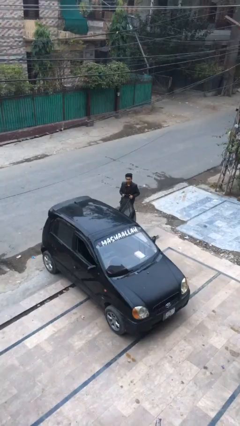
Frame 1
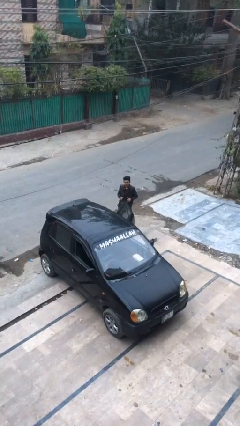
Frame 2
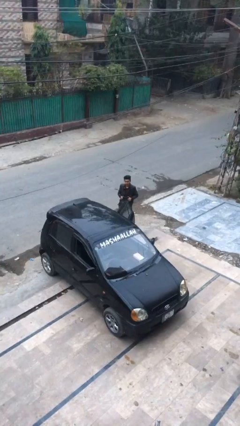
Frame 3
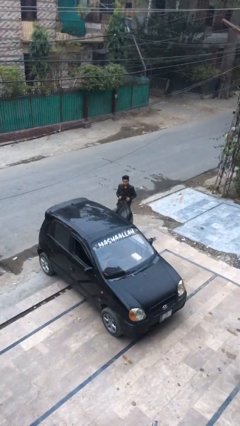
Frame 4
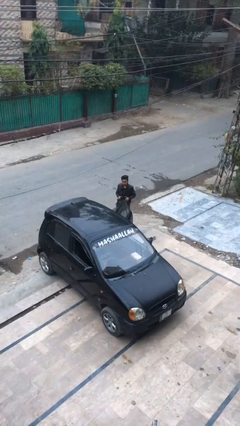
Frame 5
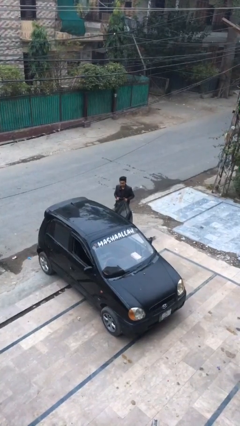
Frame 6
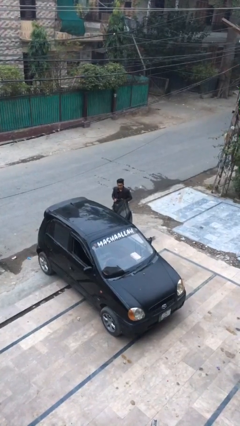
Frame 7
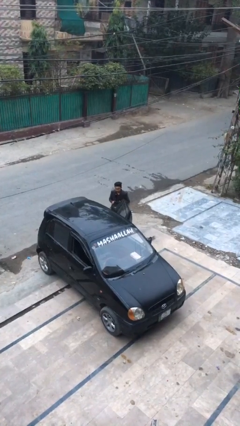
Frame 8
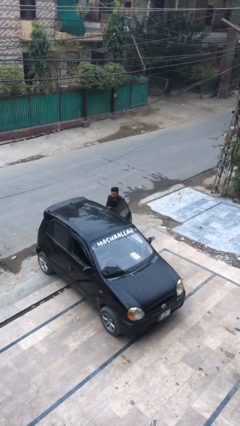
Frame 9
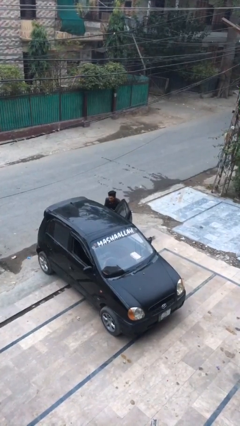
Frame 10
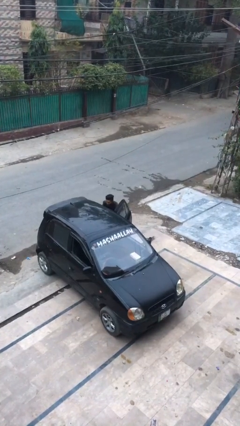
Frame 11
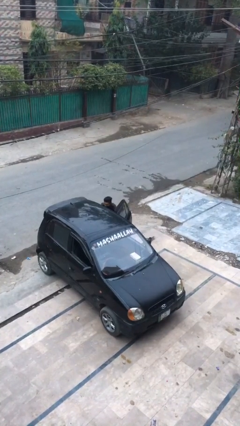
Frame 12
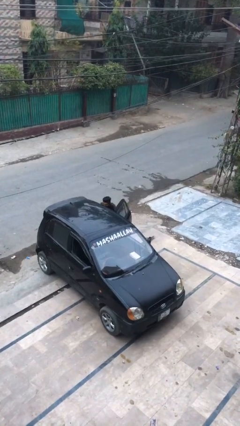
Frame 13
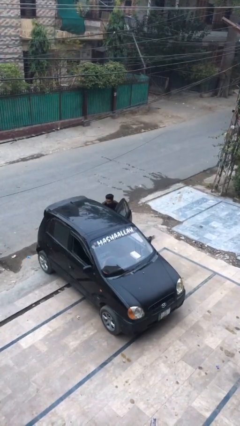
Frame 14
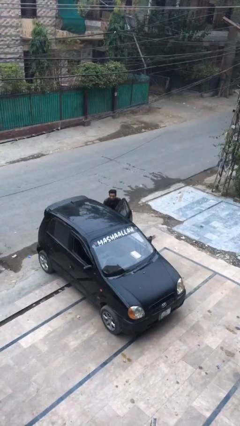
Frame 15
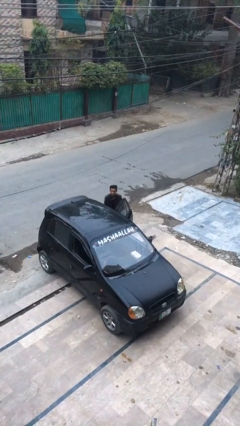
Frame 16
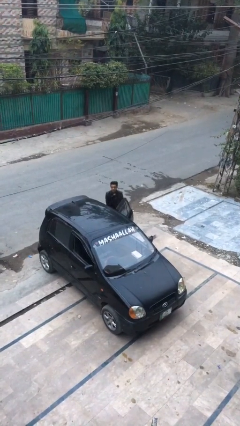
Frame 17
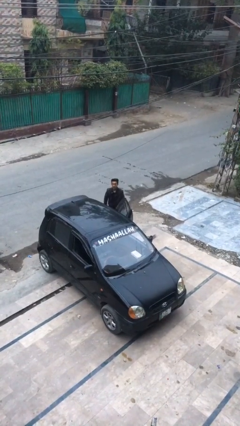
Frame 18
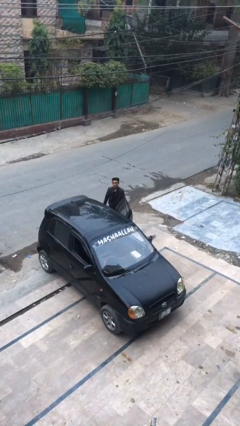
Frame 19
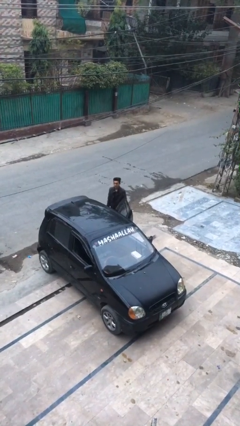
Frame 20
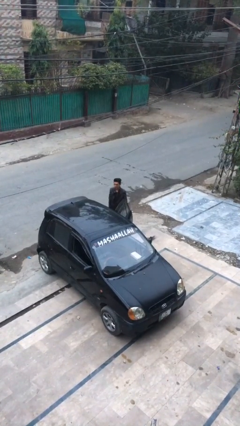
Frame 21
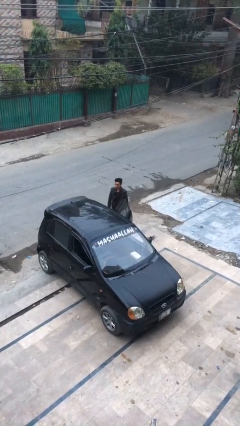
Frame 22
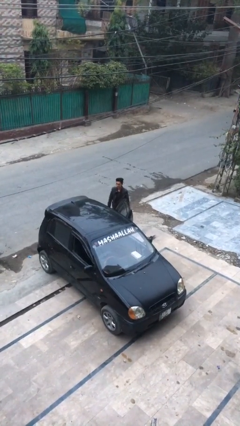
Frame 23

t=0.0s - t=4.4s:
person loads car

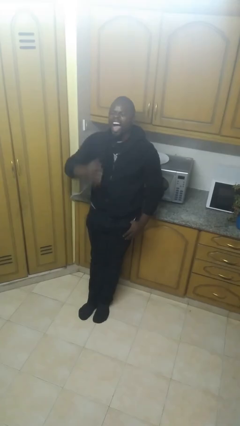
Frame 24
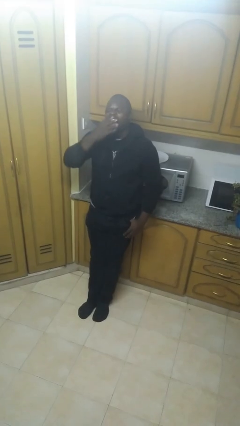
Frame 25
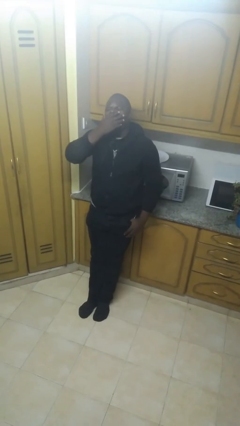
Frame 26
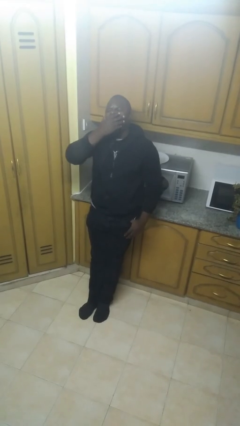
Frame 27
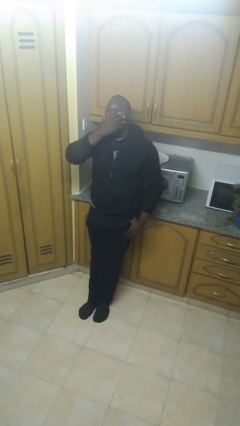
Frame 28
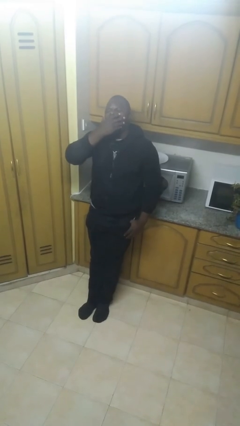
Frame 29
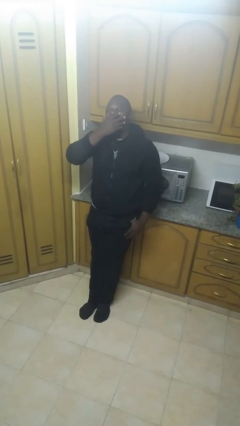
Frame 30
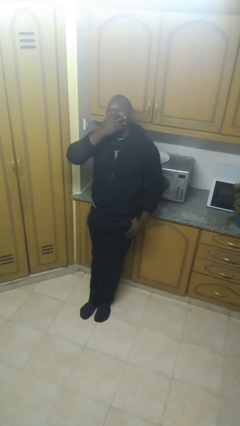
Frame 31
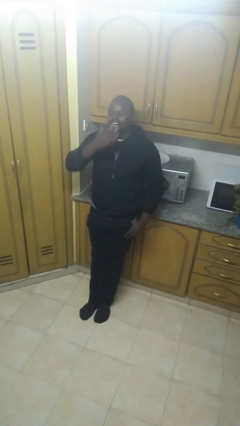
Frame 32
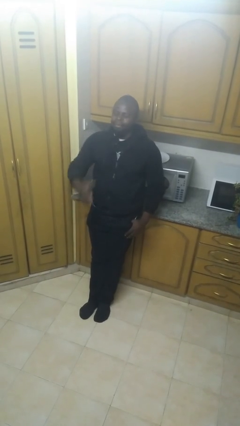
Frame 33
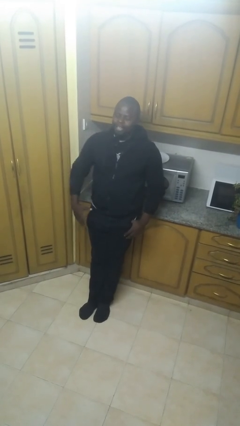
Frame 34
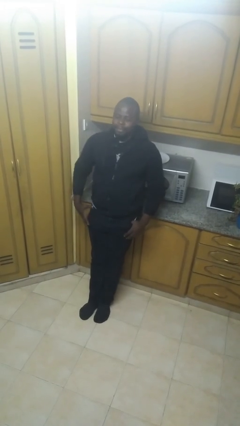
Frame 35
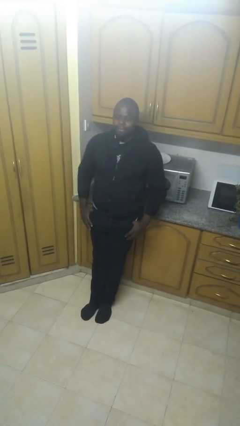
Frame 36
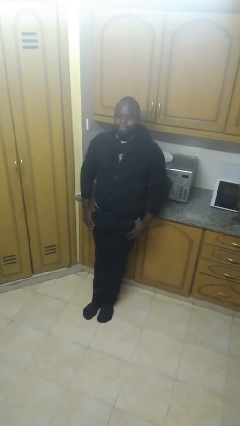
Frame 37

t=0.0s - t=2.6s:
person yawns

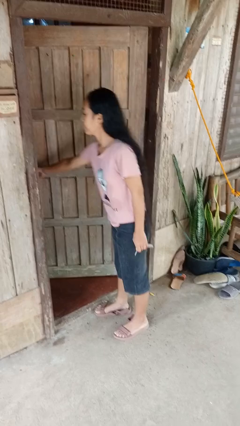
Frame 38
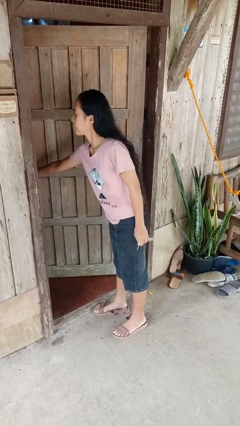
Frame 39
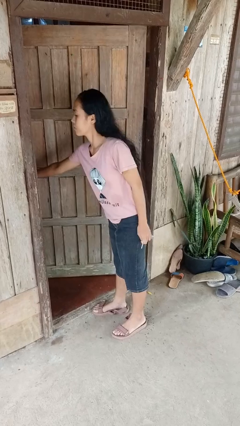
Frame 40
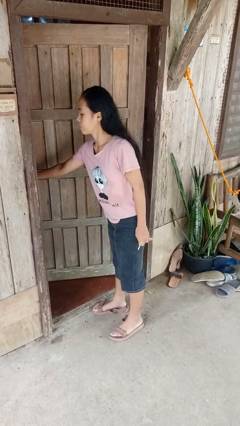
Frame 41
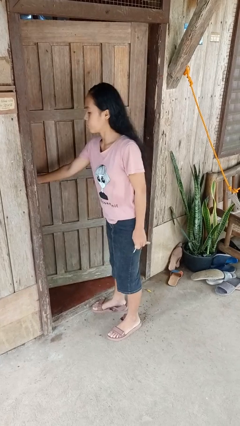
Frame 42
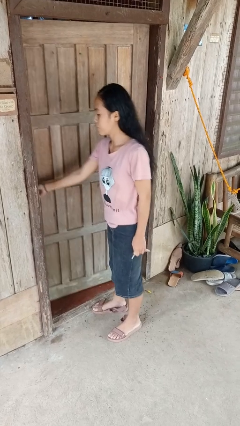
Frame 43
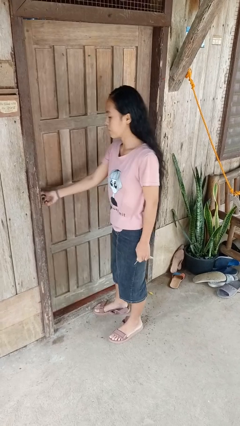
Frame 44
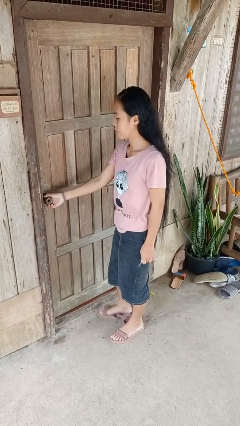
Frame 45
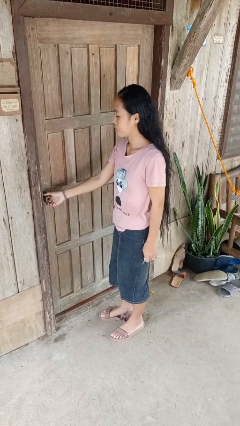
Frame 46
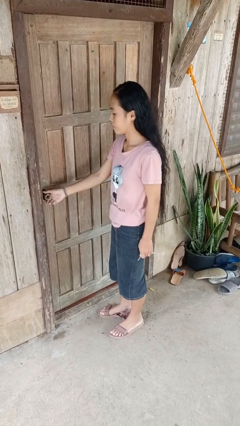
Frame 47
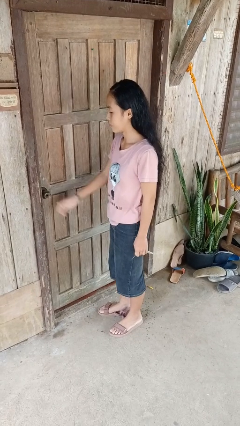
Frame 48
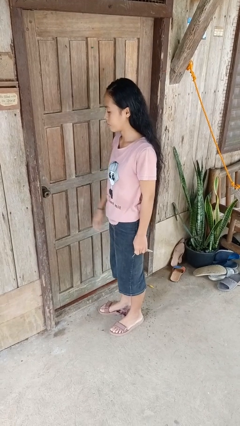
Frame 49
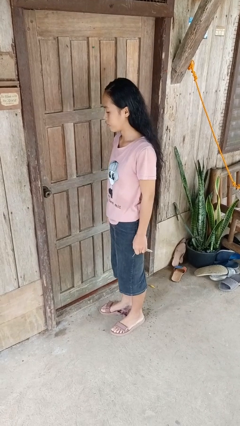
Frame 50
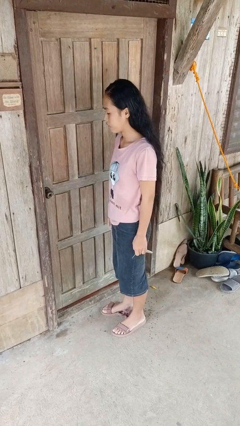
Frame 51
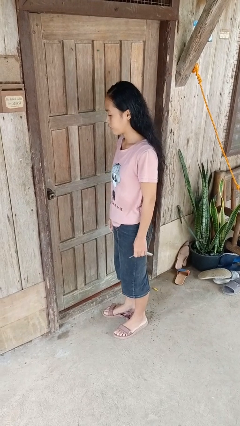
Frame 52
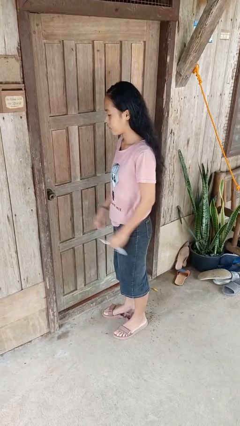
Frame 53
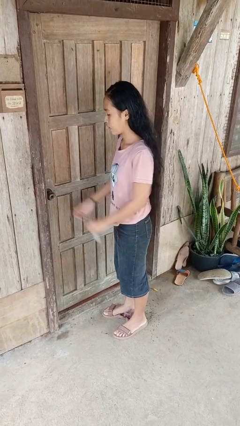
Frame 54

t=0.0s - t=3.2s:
person closes facility door

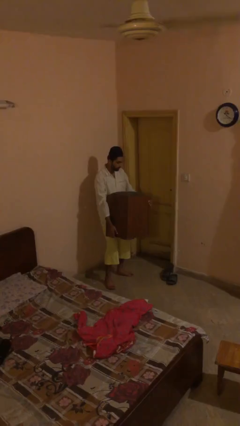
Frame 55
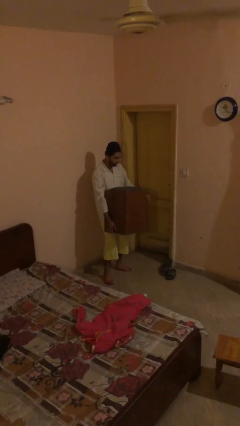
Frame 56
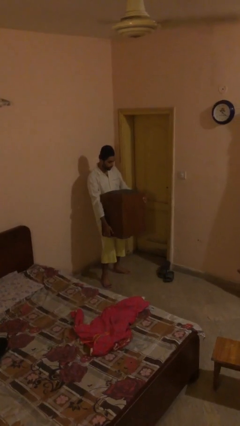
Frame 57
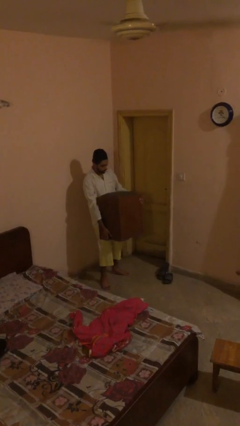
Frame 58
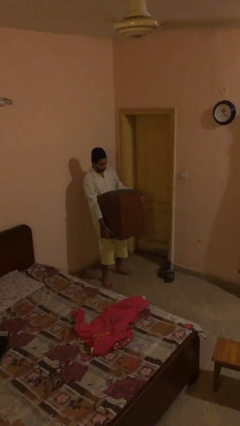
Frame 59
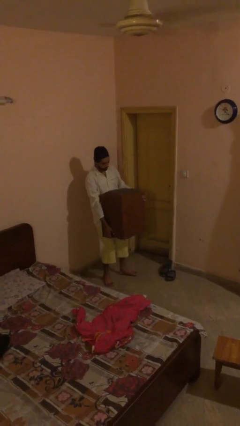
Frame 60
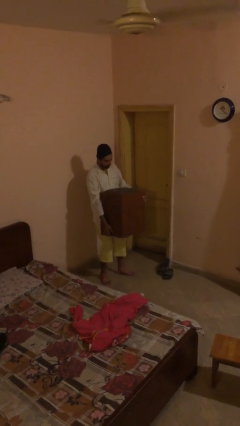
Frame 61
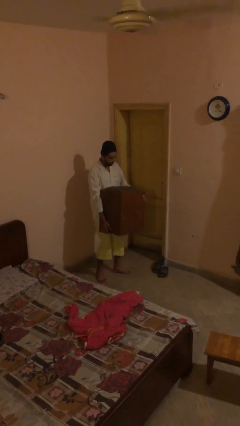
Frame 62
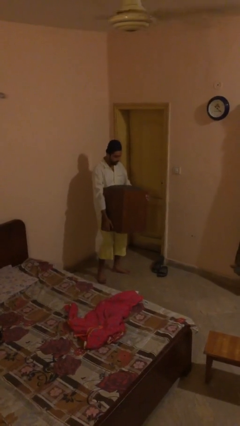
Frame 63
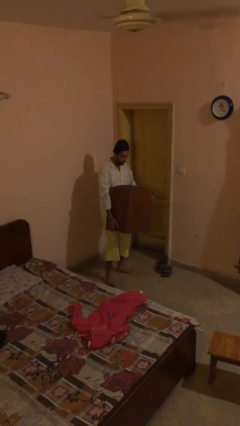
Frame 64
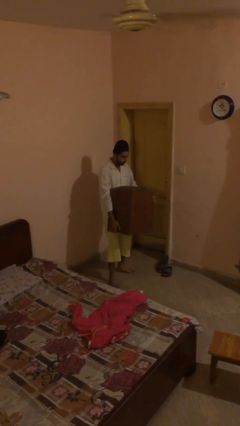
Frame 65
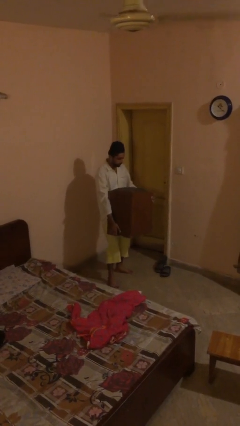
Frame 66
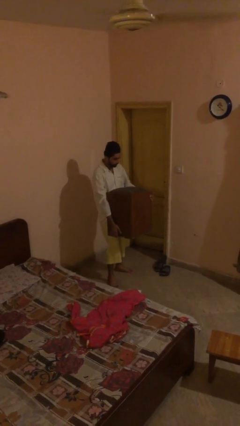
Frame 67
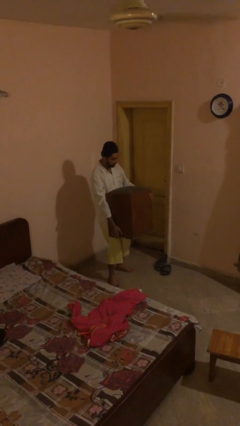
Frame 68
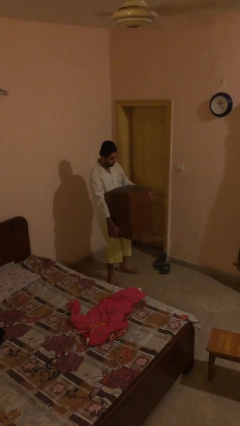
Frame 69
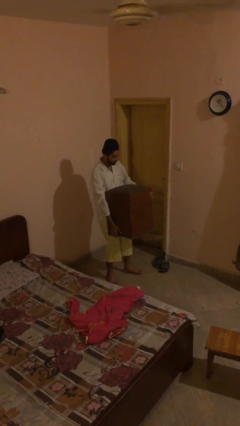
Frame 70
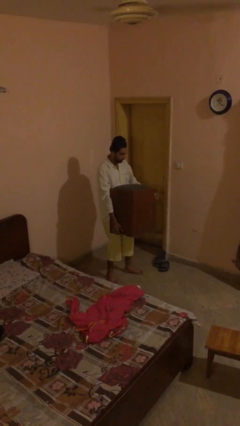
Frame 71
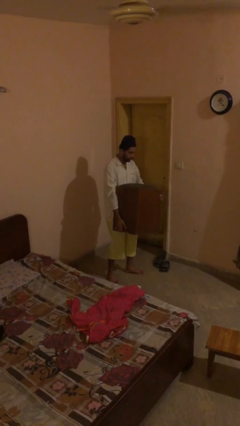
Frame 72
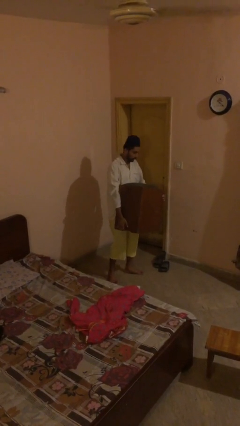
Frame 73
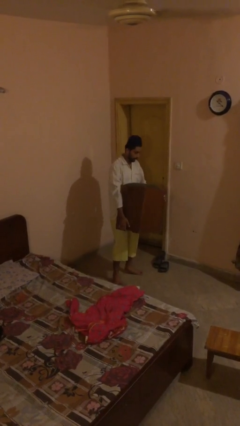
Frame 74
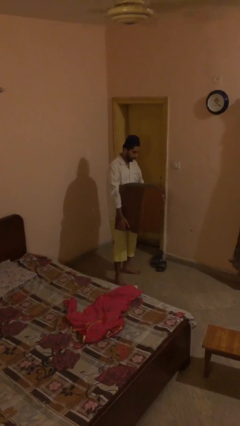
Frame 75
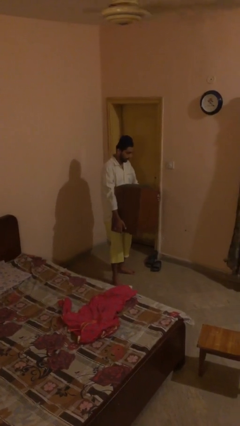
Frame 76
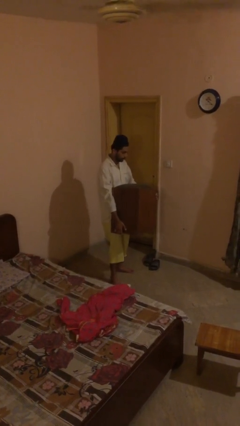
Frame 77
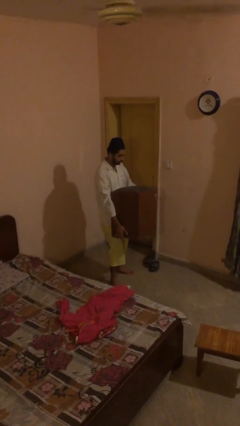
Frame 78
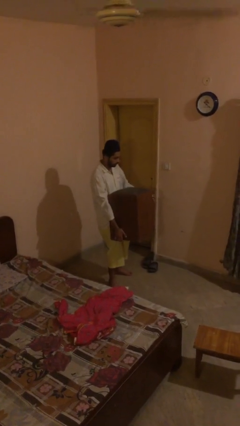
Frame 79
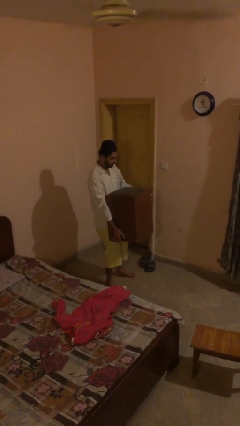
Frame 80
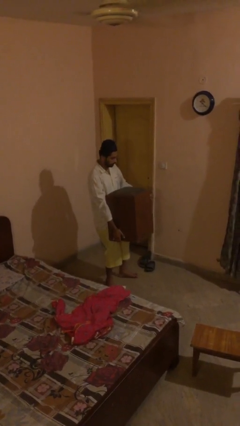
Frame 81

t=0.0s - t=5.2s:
person carries heavy object

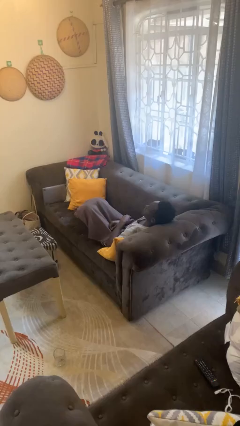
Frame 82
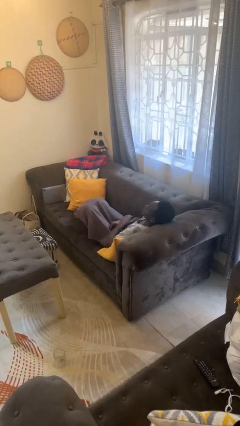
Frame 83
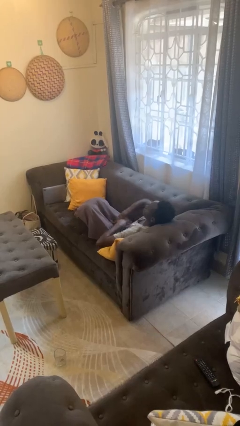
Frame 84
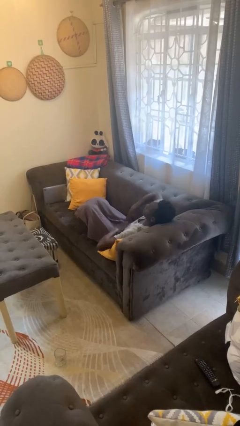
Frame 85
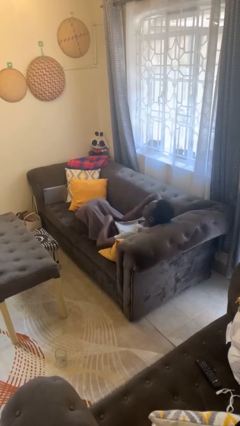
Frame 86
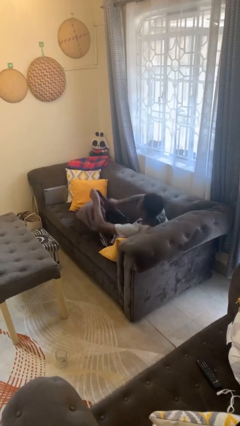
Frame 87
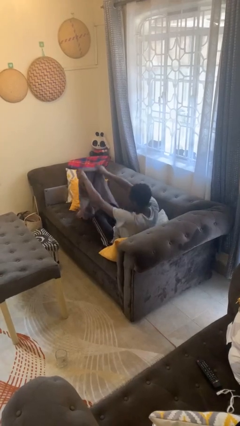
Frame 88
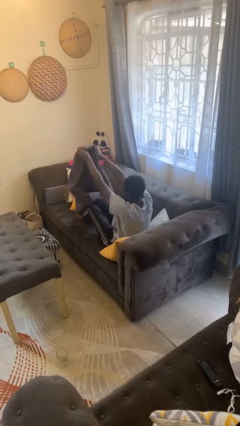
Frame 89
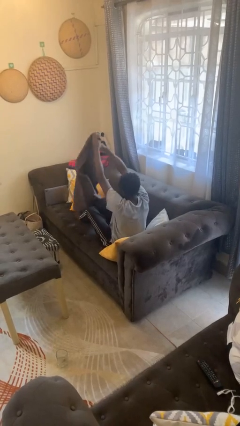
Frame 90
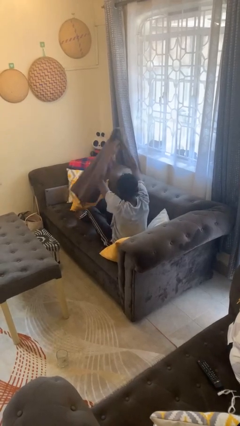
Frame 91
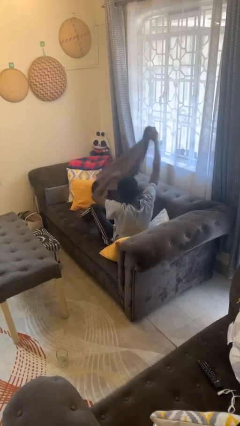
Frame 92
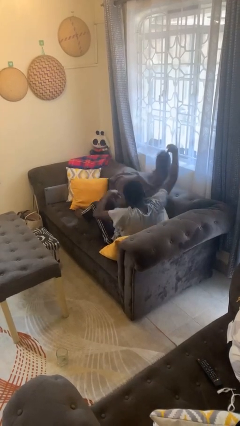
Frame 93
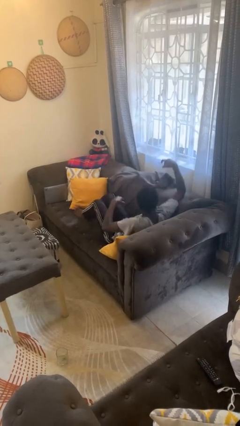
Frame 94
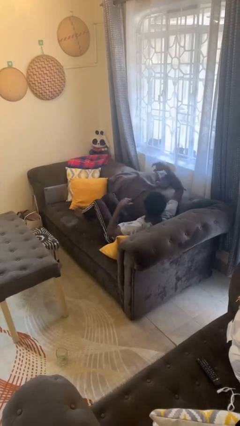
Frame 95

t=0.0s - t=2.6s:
person uncovers with blanket
